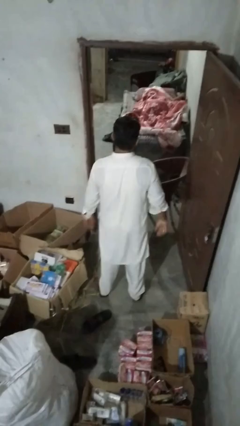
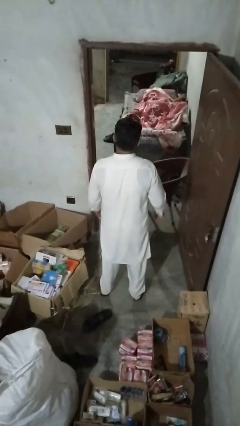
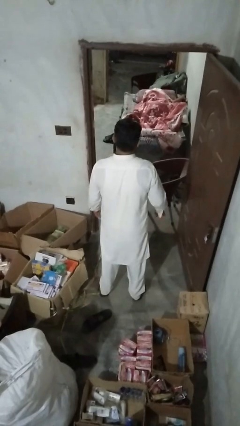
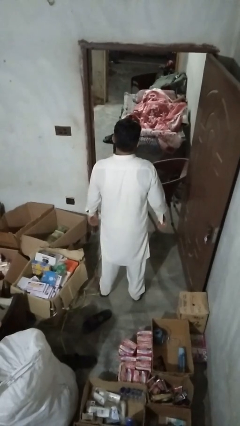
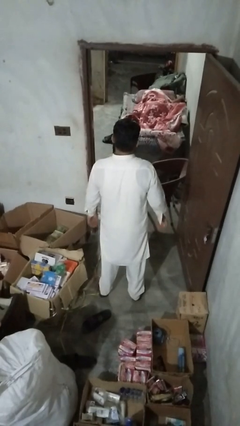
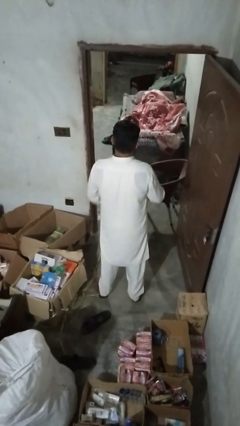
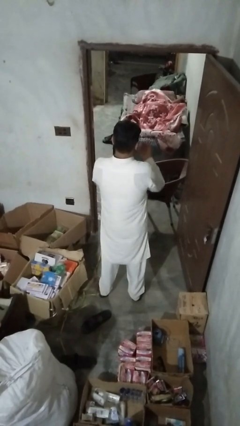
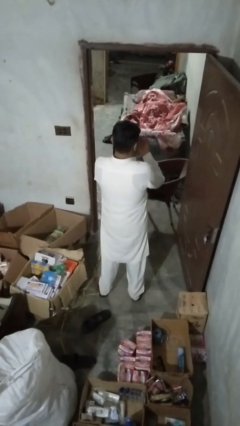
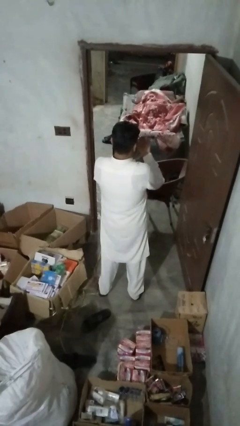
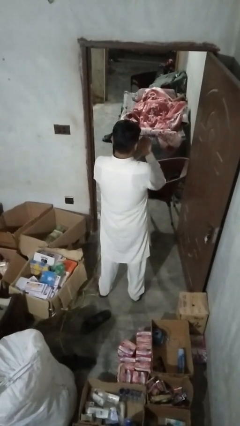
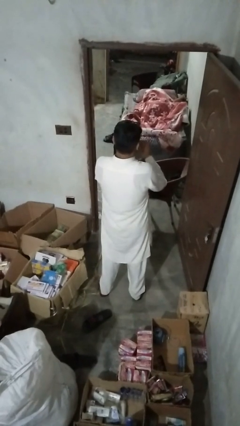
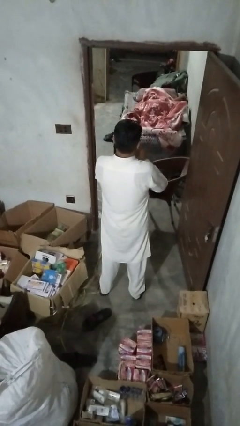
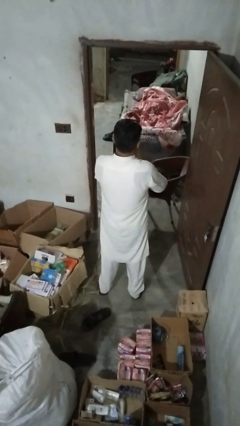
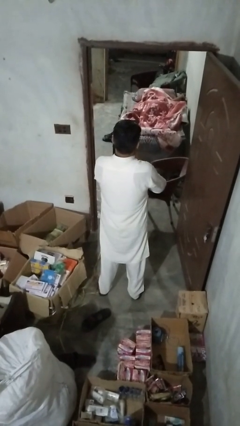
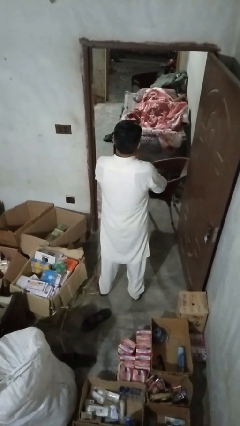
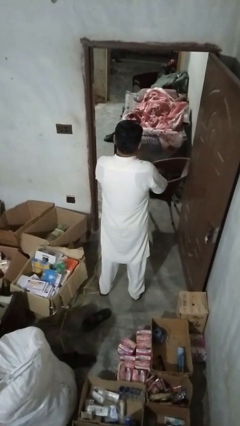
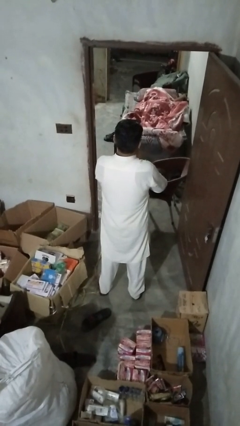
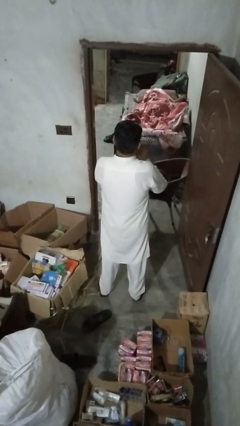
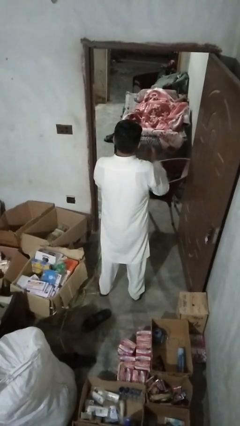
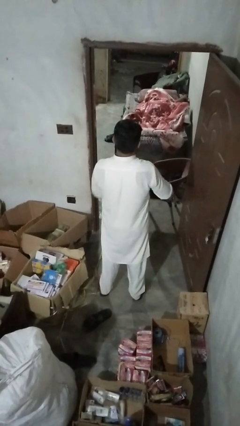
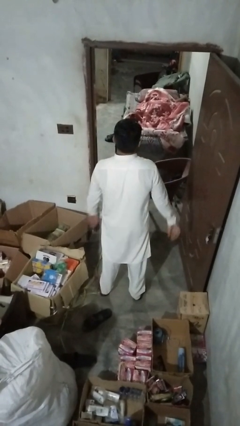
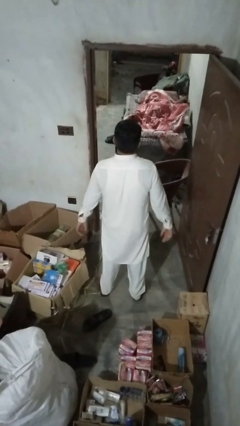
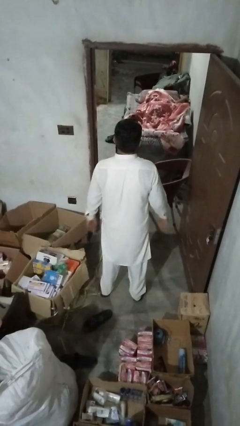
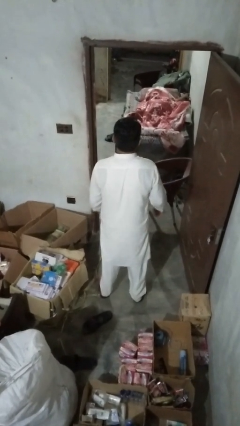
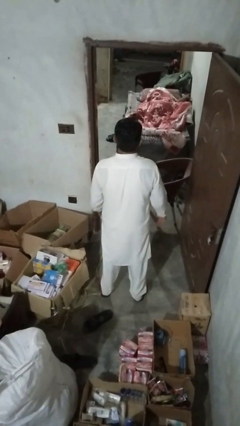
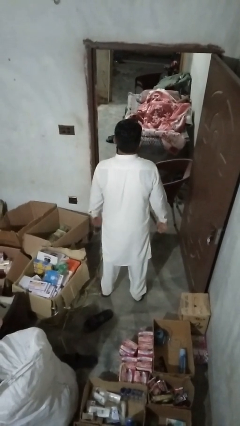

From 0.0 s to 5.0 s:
person buttons shirt

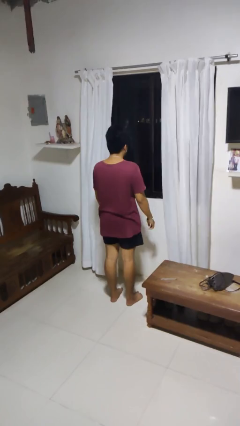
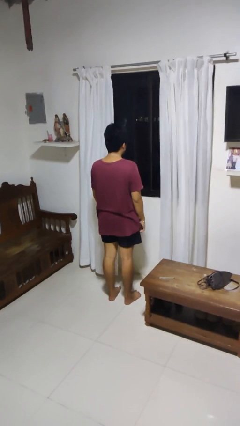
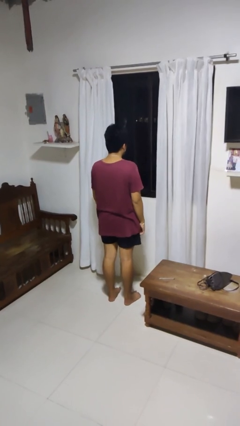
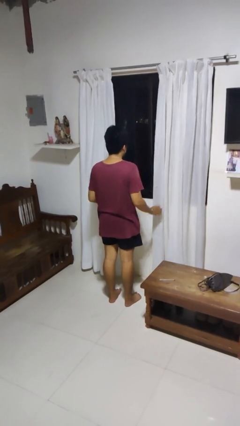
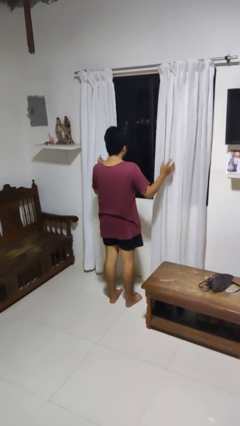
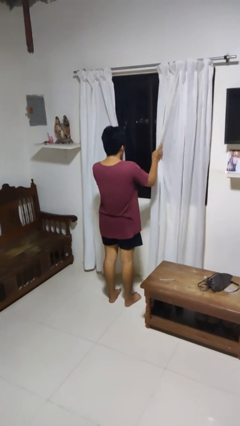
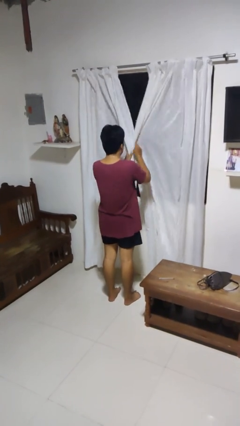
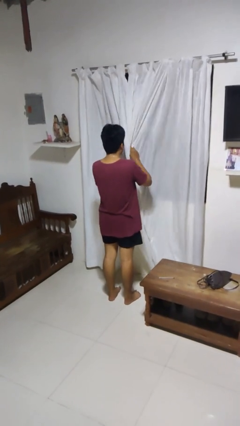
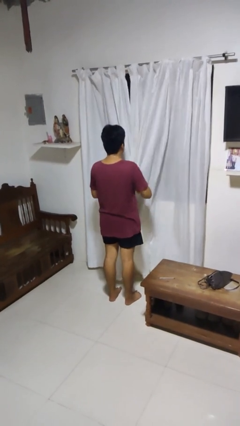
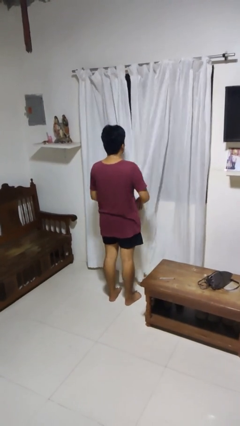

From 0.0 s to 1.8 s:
person closes curtains

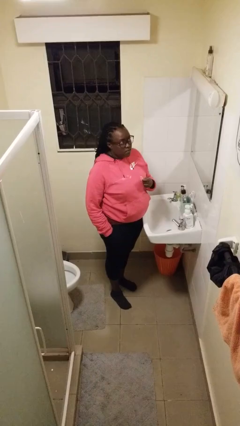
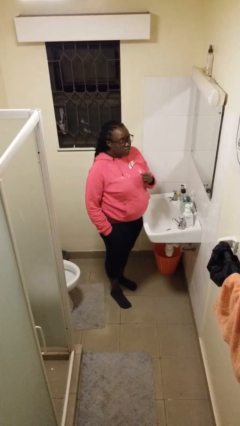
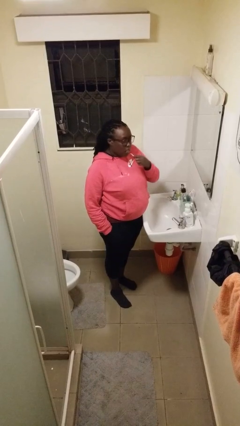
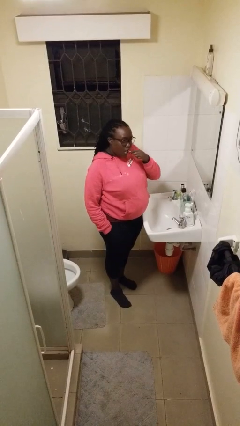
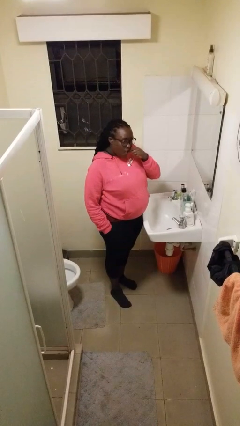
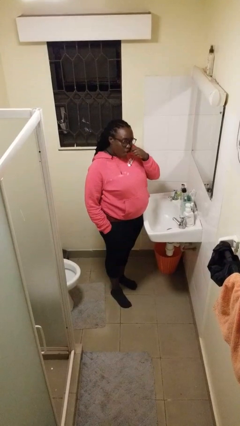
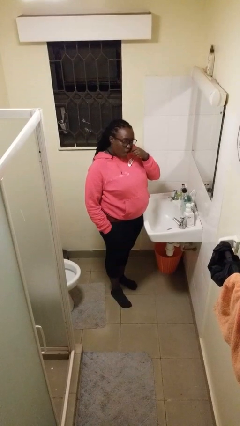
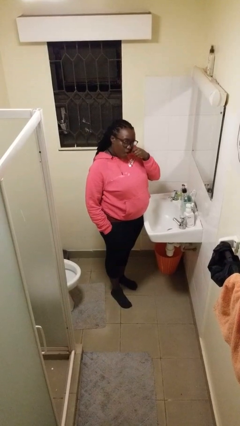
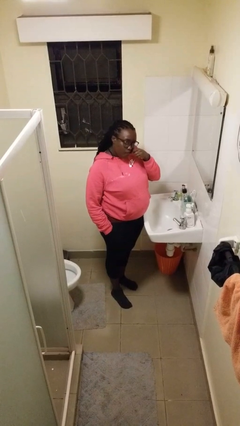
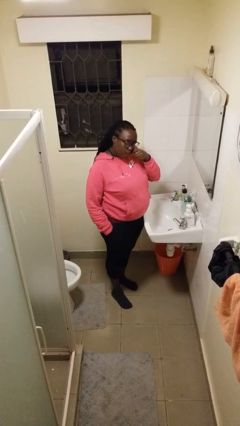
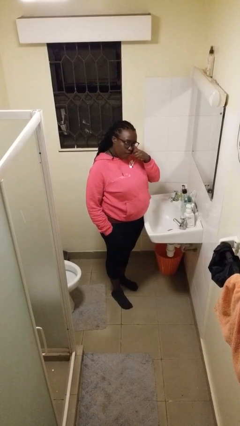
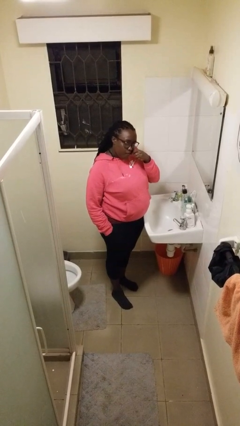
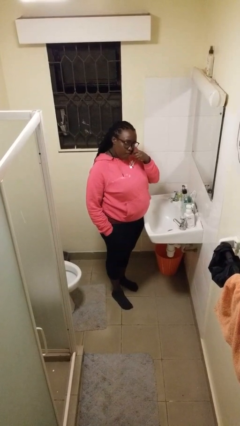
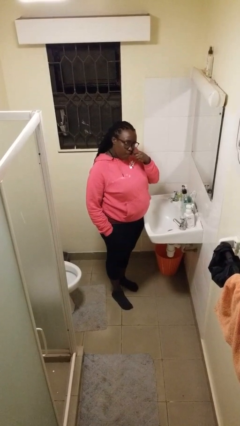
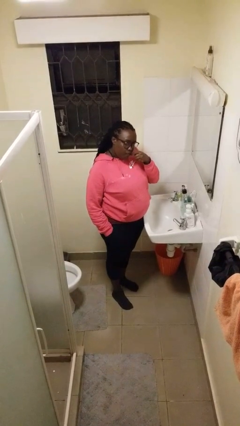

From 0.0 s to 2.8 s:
person flosses

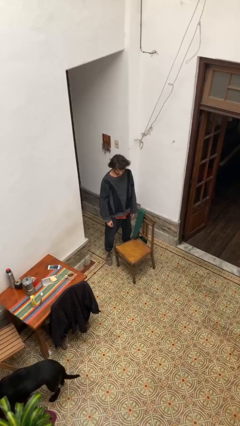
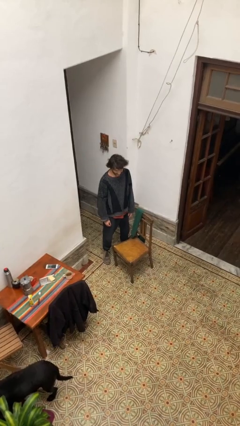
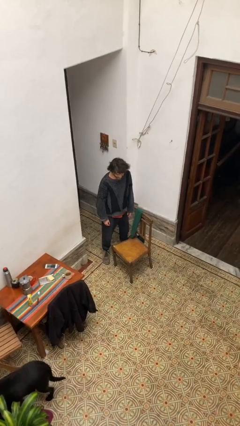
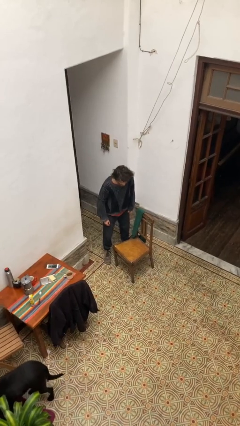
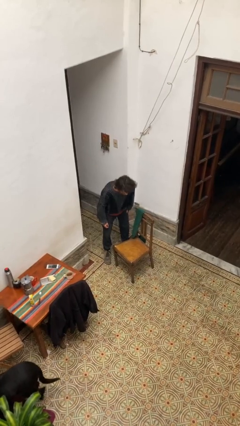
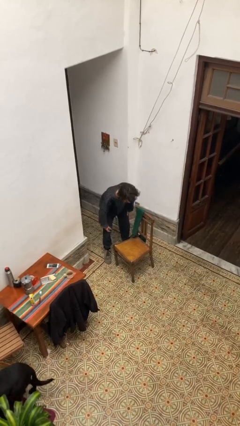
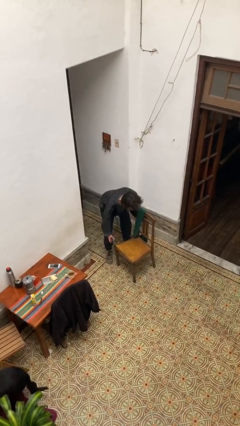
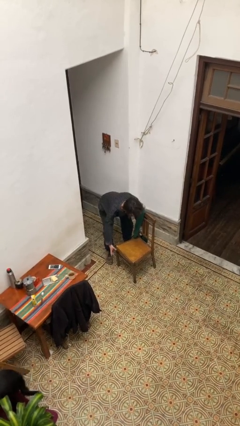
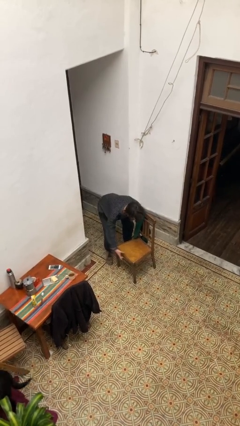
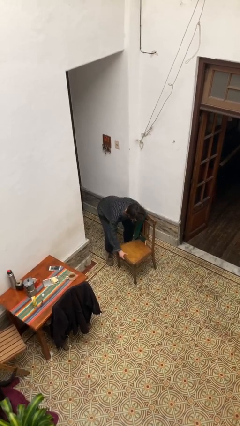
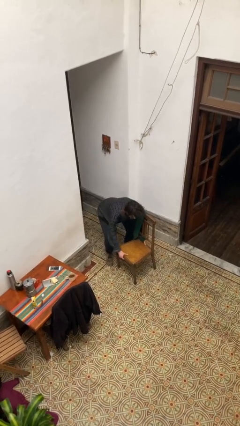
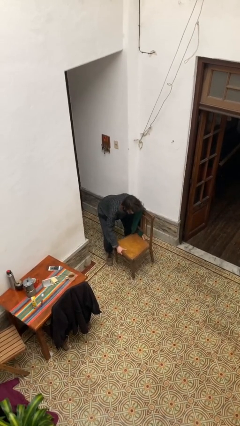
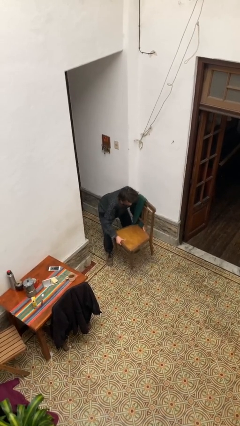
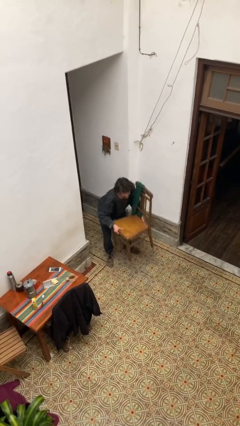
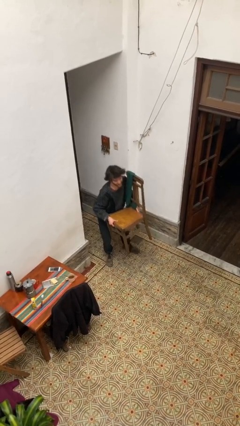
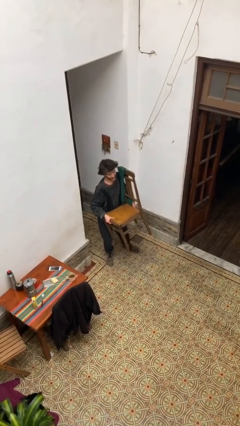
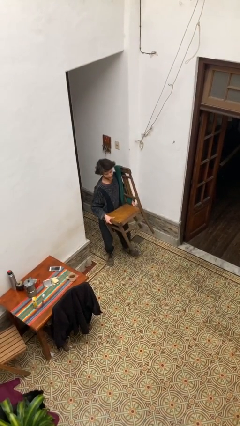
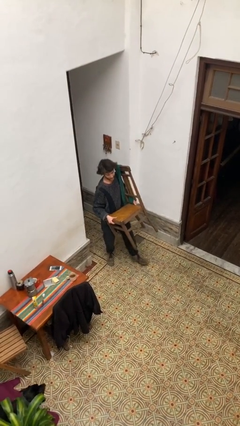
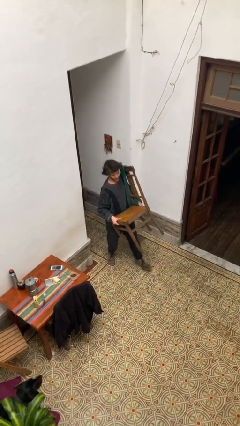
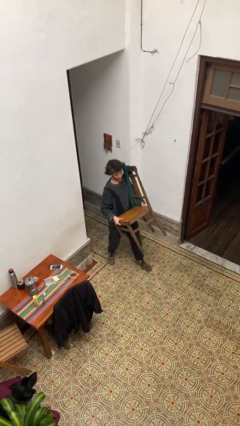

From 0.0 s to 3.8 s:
person picks up object from floor

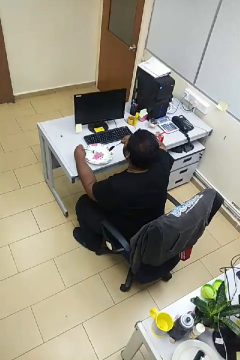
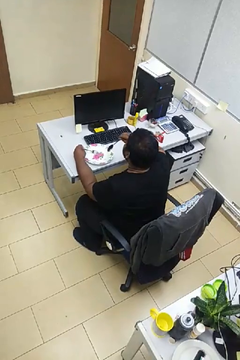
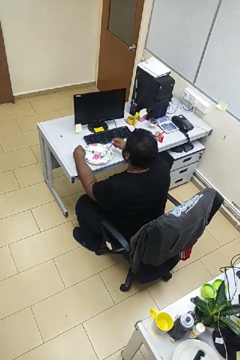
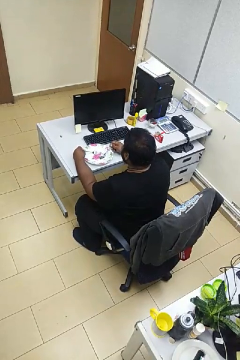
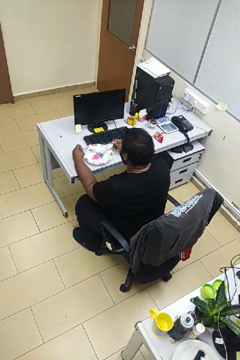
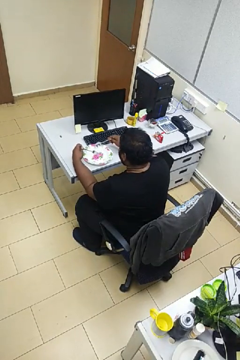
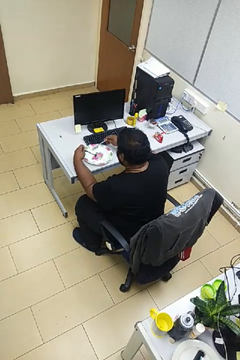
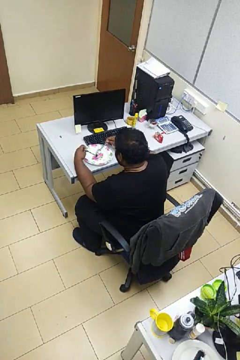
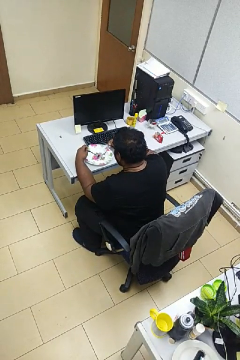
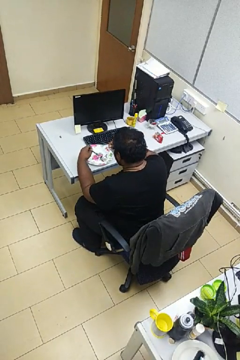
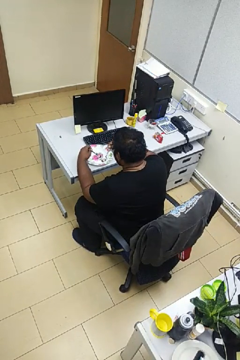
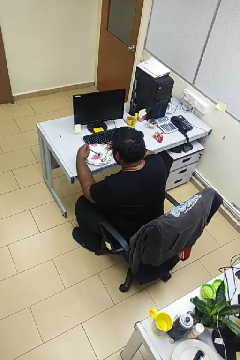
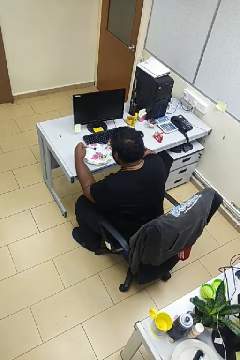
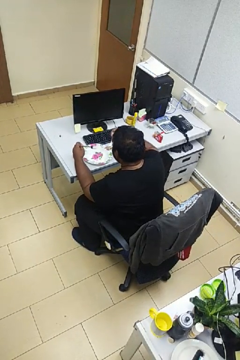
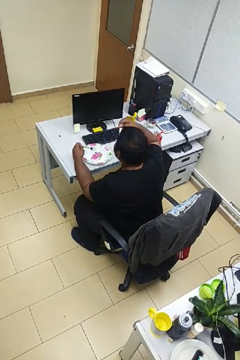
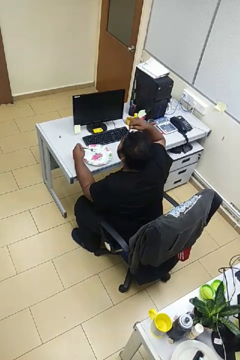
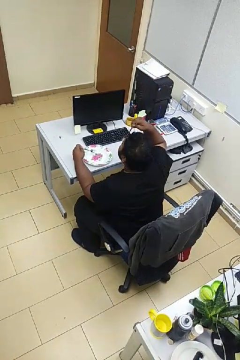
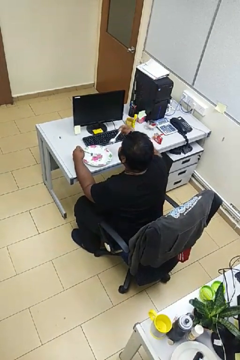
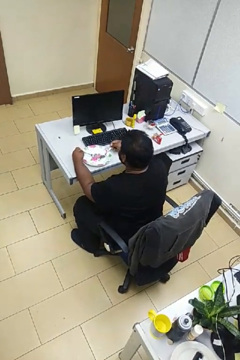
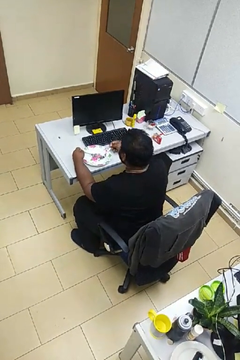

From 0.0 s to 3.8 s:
person eats with utensil

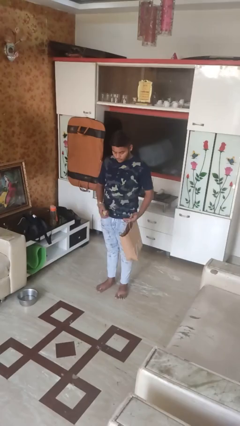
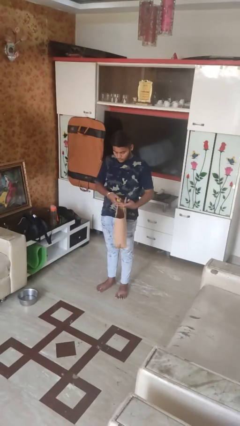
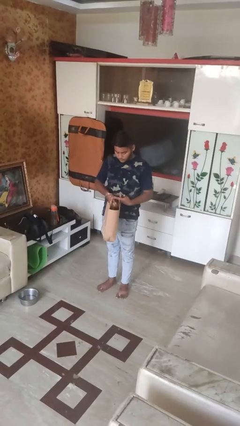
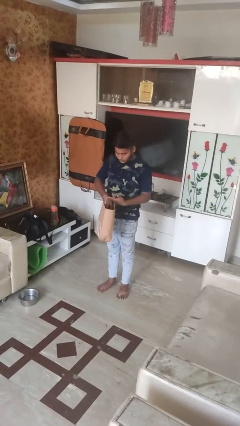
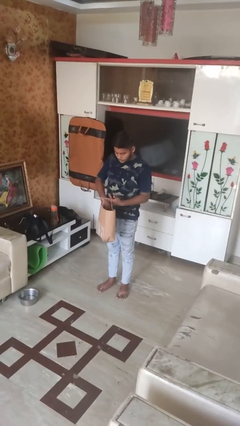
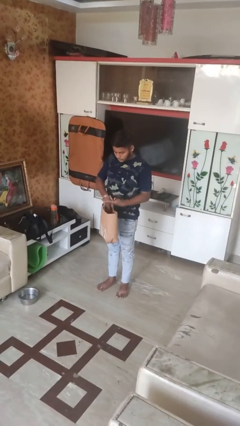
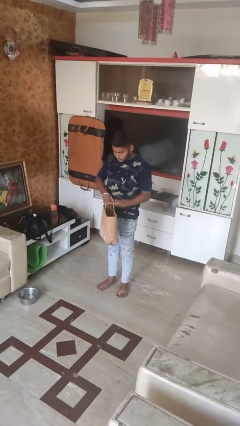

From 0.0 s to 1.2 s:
person puts object into bag
